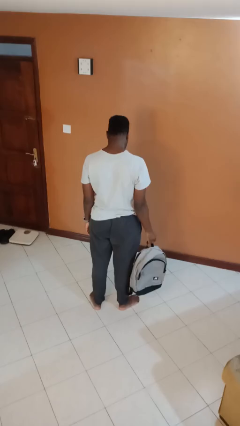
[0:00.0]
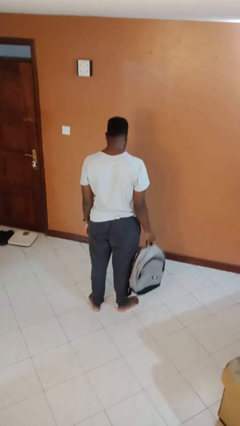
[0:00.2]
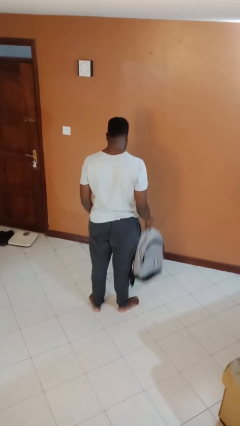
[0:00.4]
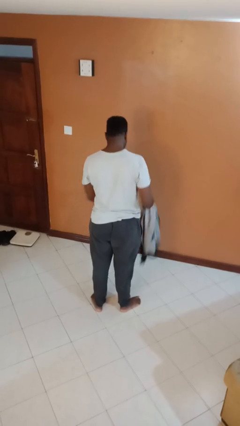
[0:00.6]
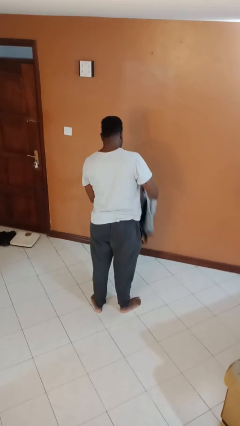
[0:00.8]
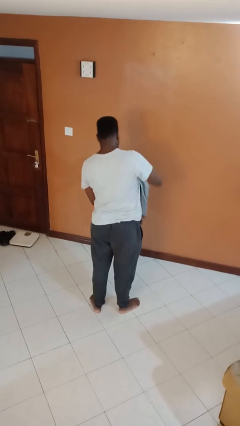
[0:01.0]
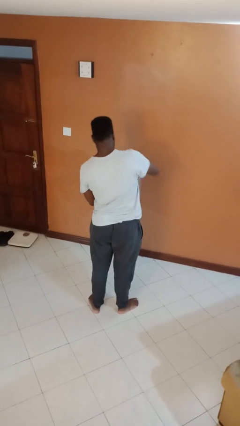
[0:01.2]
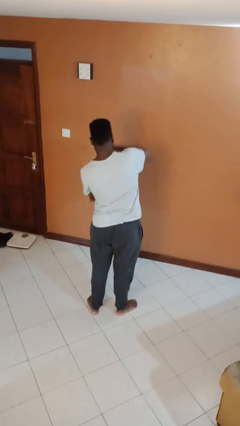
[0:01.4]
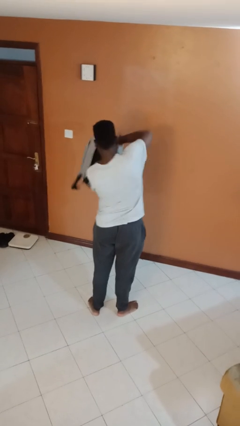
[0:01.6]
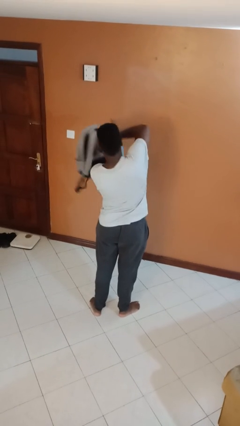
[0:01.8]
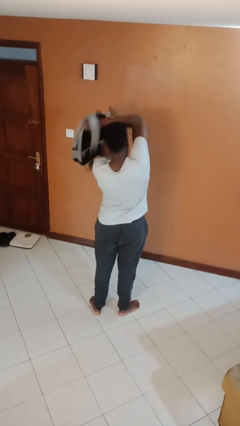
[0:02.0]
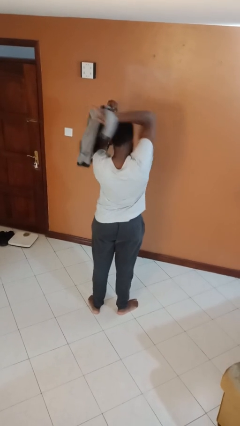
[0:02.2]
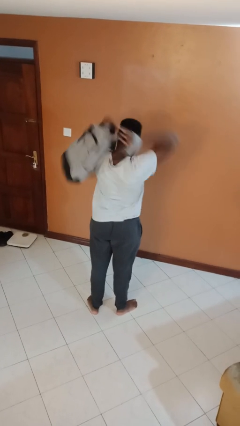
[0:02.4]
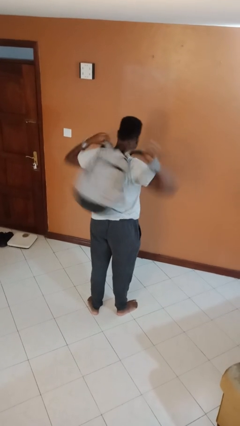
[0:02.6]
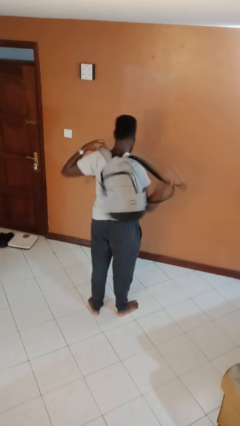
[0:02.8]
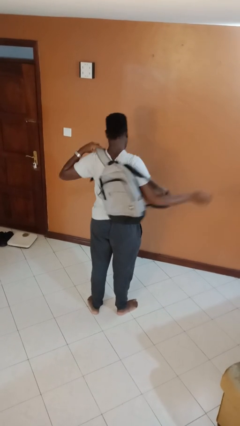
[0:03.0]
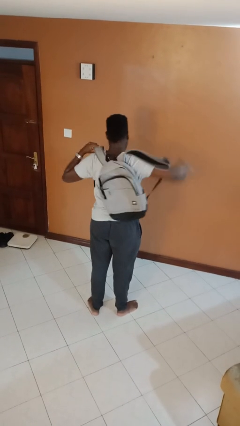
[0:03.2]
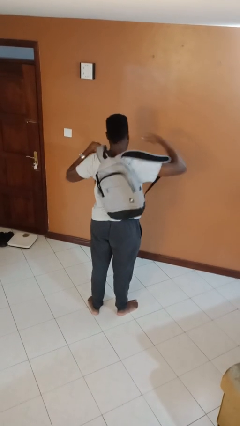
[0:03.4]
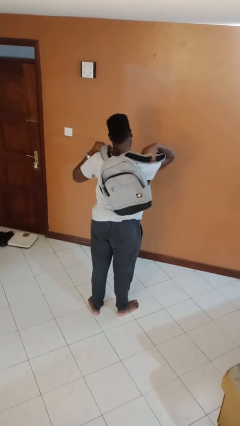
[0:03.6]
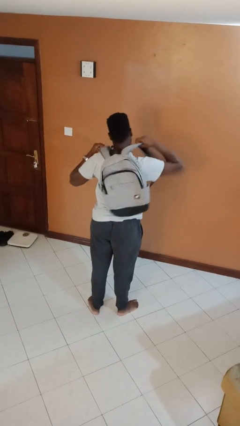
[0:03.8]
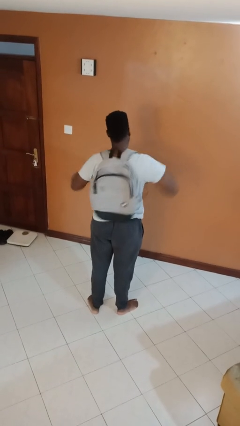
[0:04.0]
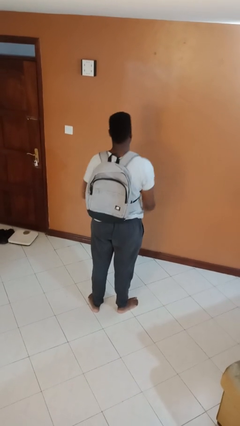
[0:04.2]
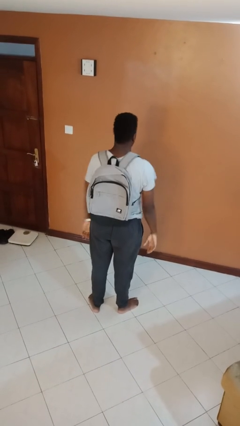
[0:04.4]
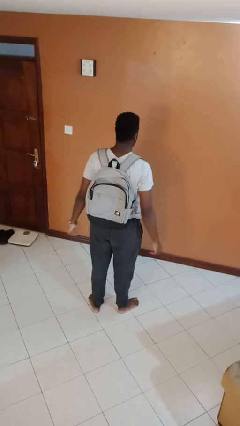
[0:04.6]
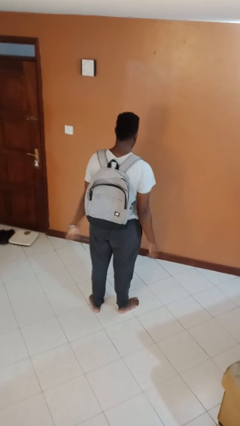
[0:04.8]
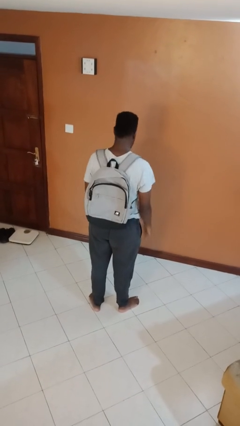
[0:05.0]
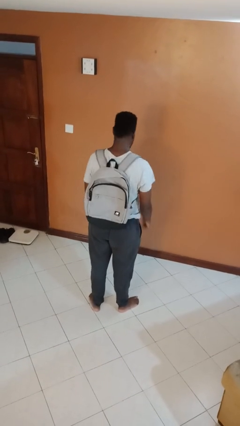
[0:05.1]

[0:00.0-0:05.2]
person puts on backpack

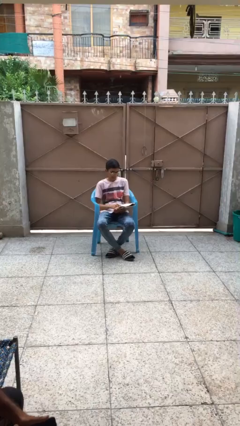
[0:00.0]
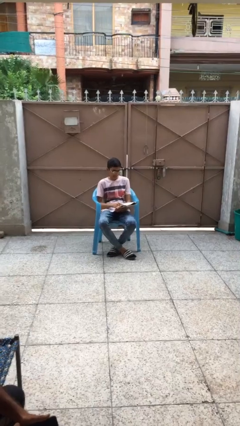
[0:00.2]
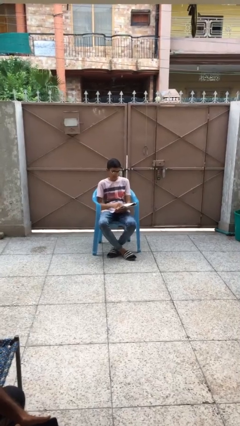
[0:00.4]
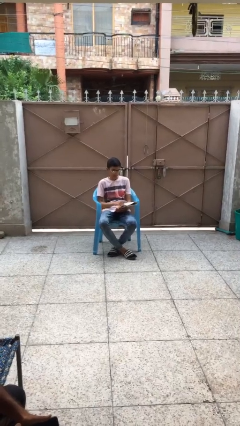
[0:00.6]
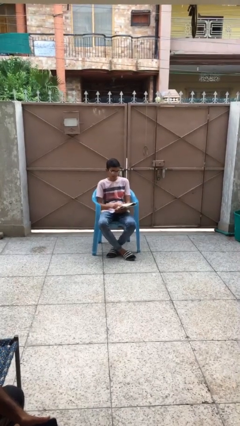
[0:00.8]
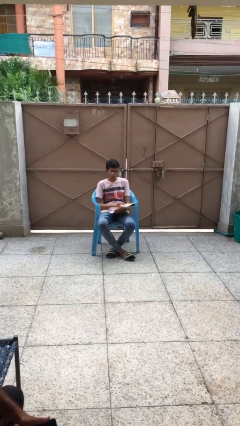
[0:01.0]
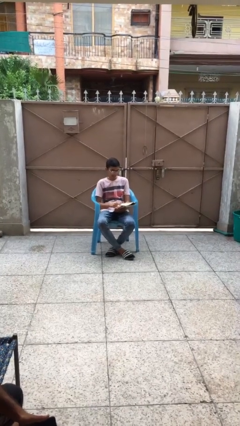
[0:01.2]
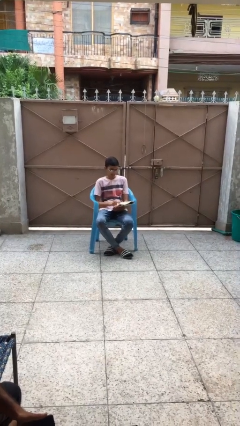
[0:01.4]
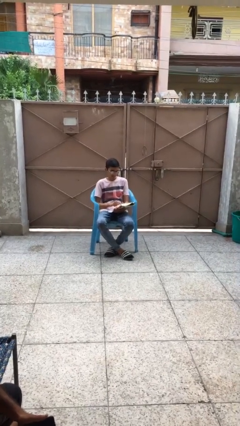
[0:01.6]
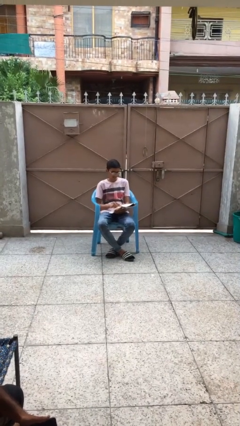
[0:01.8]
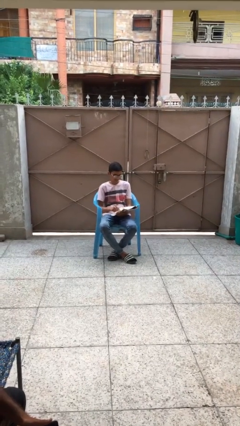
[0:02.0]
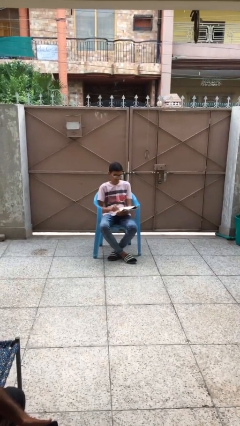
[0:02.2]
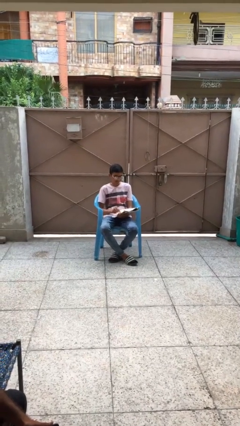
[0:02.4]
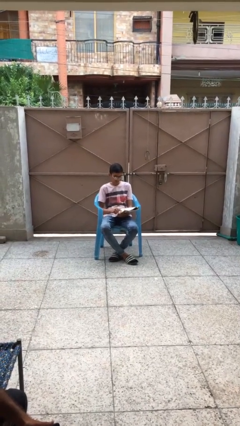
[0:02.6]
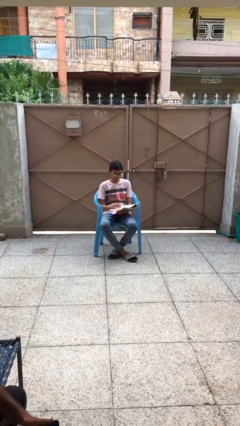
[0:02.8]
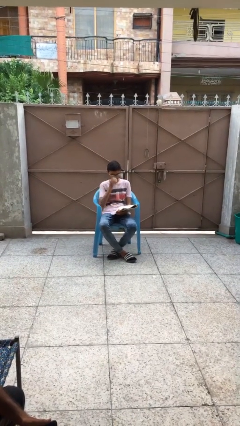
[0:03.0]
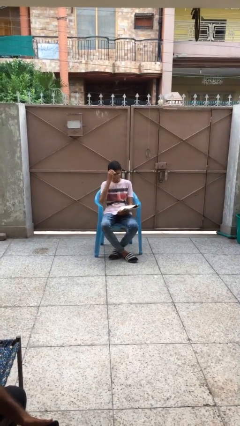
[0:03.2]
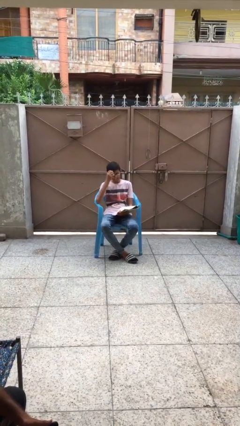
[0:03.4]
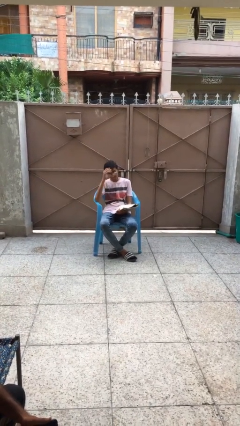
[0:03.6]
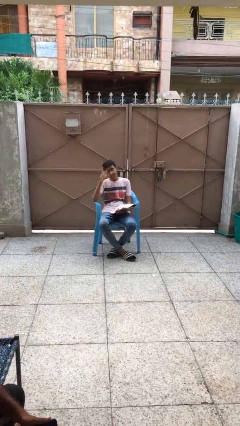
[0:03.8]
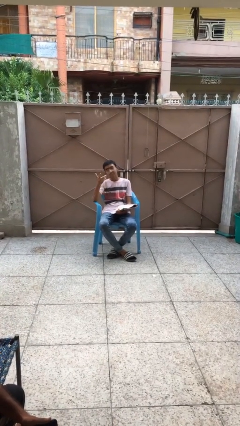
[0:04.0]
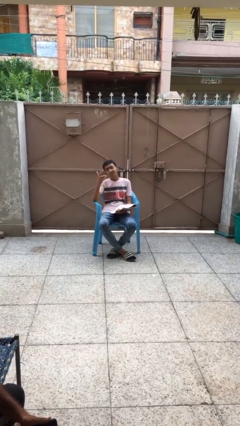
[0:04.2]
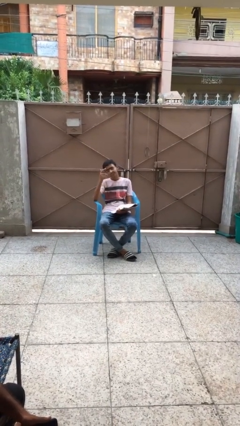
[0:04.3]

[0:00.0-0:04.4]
person reads document

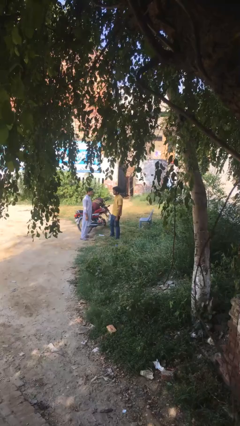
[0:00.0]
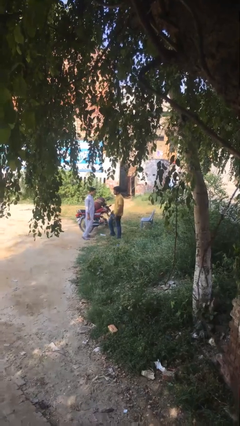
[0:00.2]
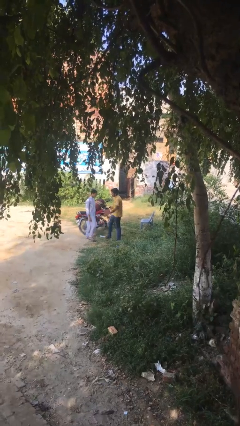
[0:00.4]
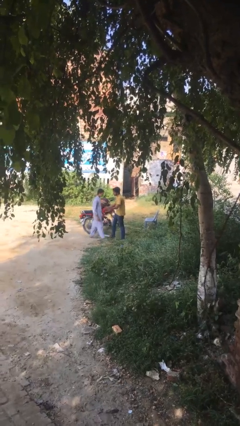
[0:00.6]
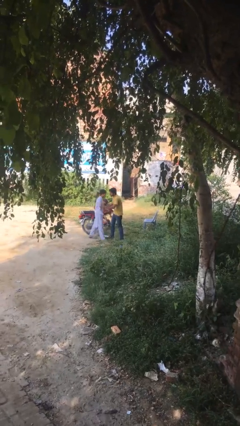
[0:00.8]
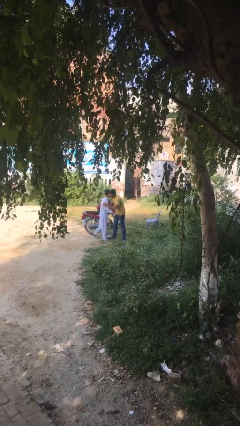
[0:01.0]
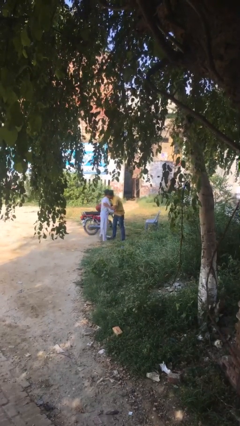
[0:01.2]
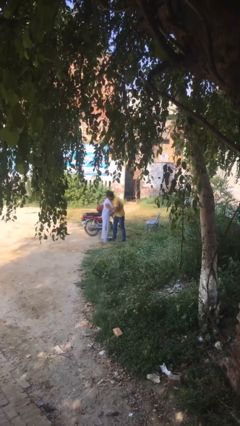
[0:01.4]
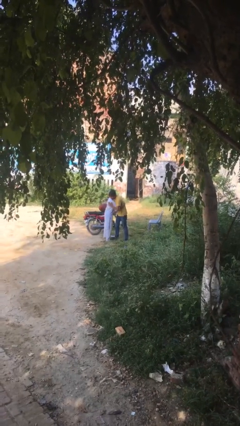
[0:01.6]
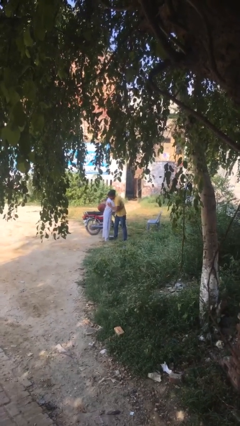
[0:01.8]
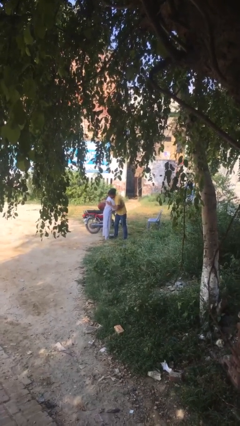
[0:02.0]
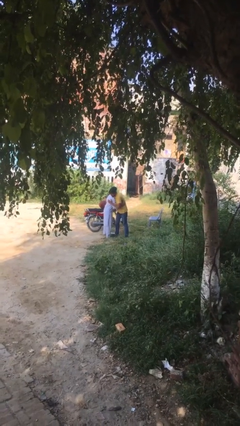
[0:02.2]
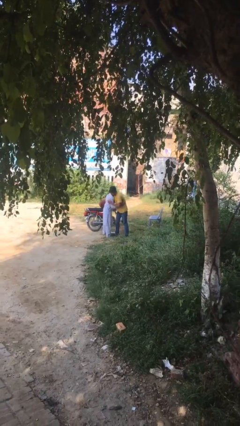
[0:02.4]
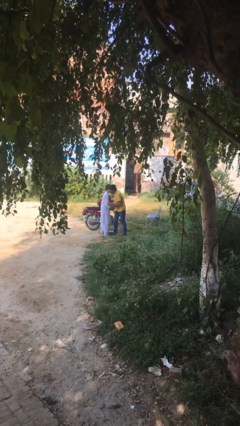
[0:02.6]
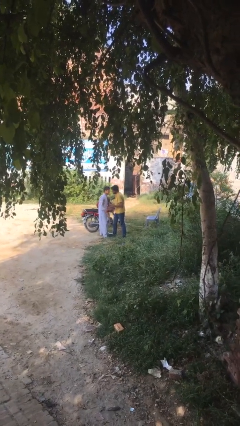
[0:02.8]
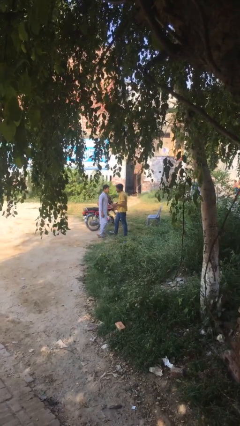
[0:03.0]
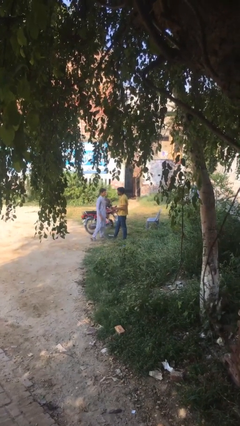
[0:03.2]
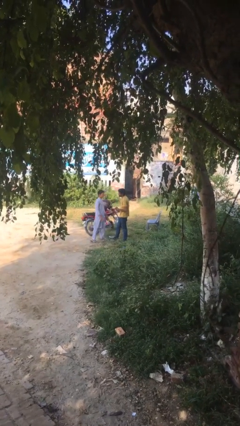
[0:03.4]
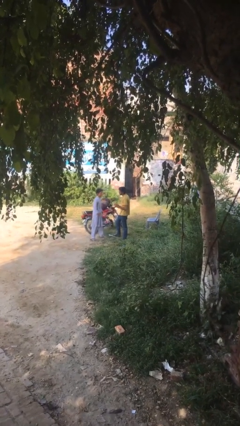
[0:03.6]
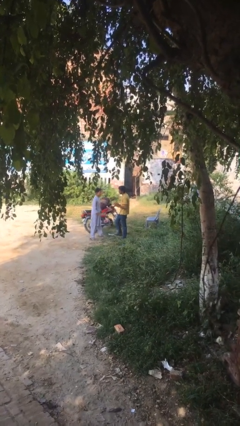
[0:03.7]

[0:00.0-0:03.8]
person embraces person

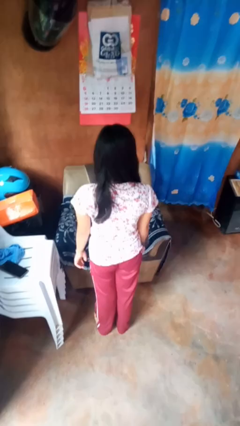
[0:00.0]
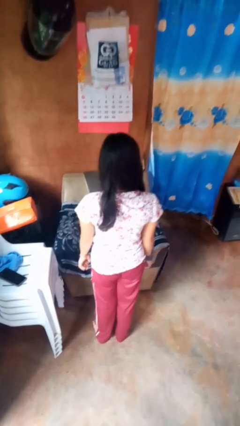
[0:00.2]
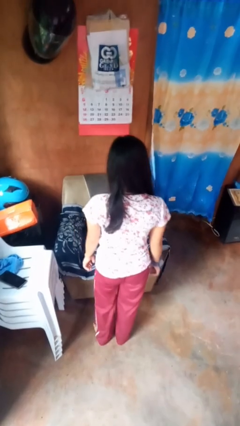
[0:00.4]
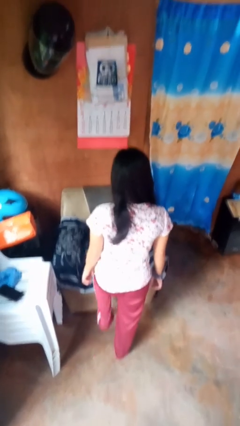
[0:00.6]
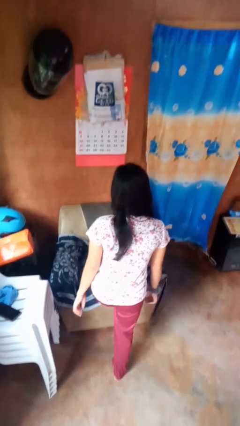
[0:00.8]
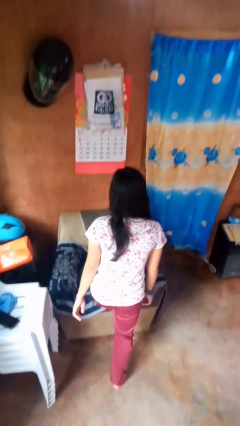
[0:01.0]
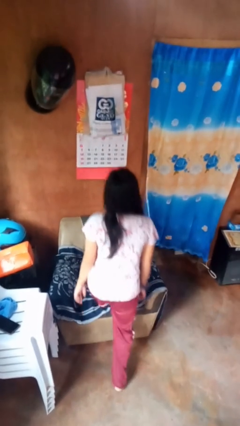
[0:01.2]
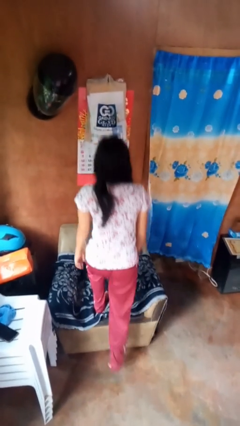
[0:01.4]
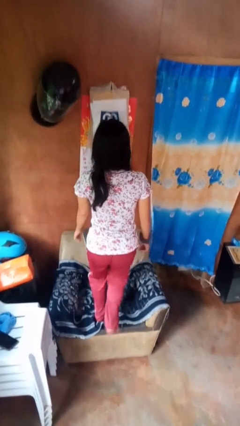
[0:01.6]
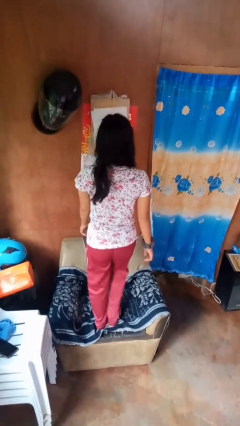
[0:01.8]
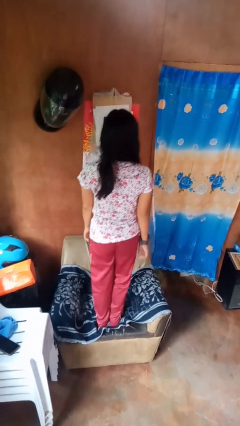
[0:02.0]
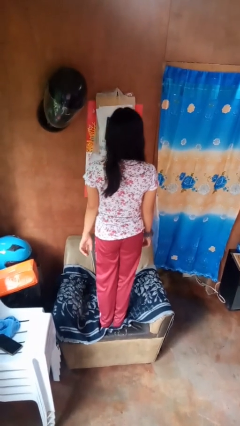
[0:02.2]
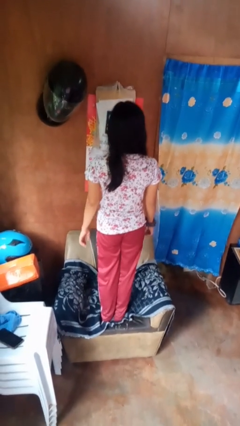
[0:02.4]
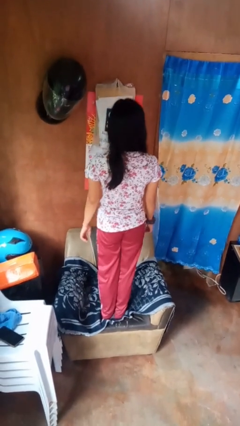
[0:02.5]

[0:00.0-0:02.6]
person climbs on couch

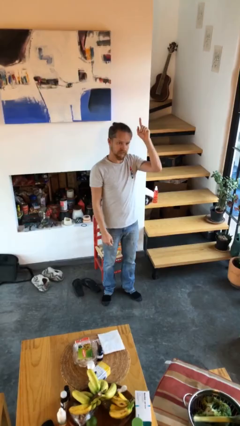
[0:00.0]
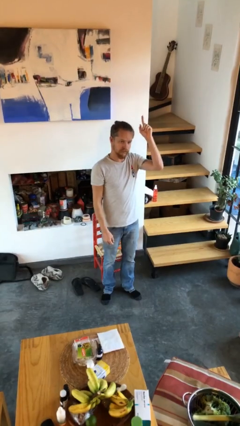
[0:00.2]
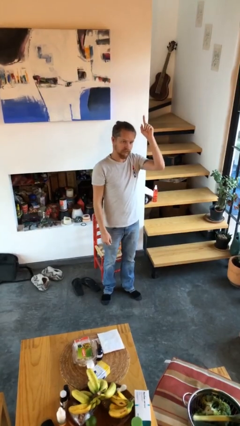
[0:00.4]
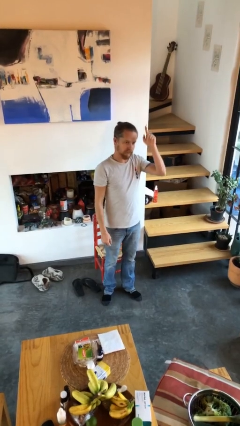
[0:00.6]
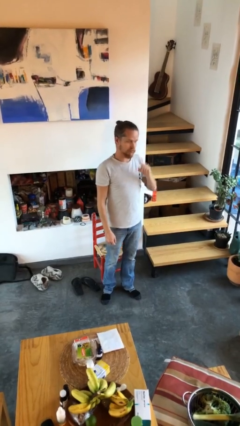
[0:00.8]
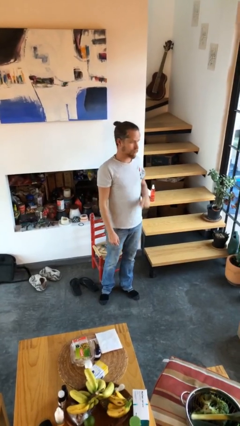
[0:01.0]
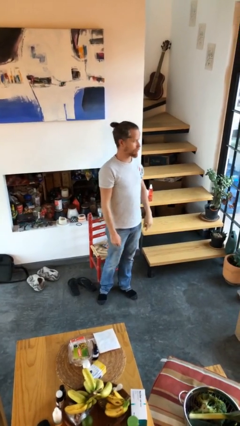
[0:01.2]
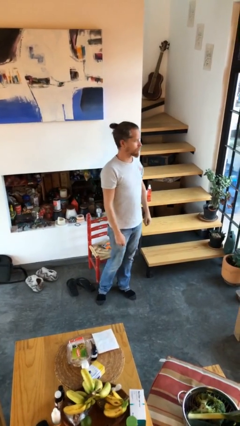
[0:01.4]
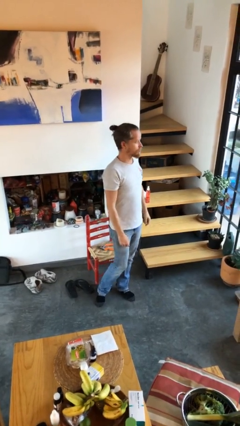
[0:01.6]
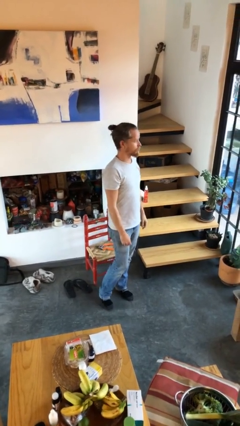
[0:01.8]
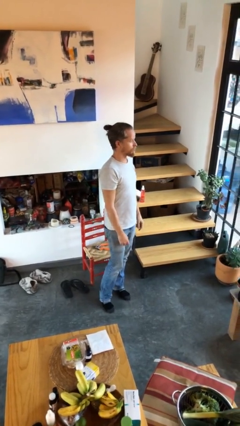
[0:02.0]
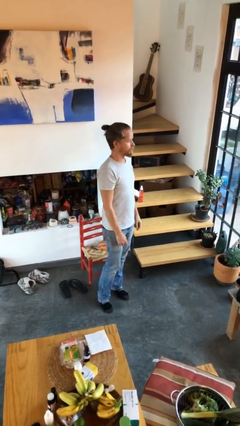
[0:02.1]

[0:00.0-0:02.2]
person gestures lower hand
